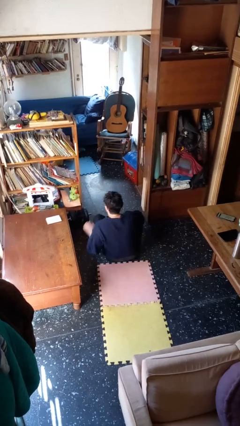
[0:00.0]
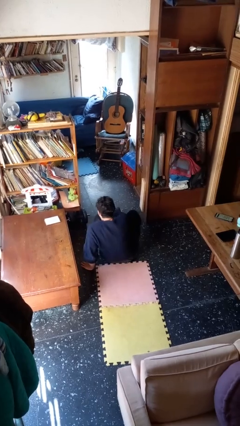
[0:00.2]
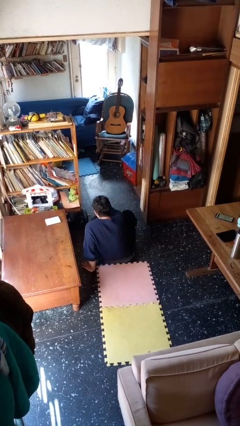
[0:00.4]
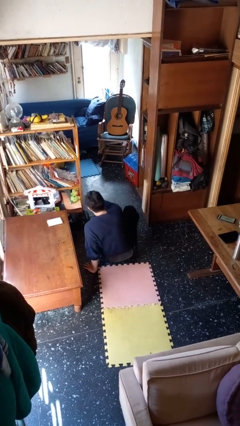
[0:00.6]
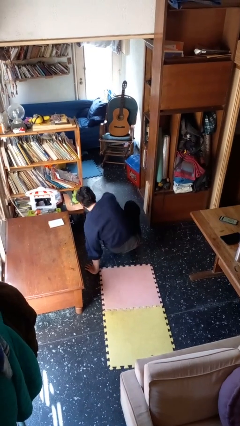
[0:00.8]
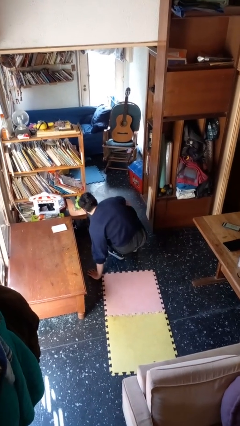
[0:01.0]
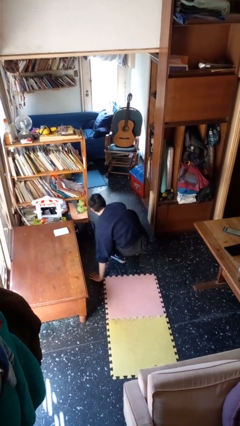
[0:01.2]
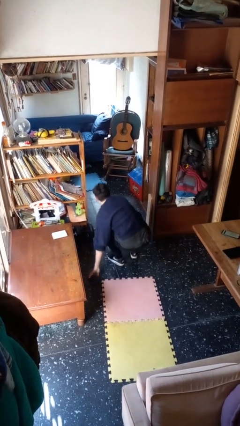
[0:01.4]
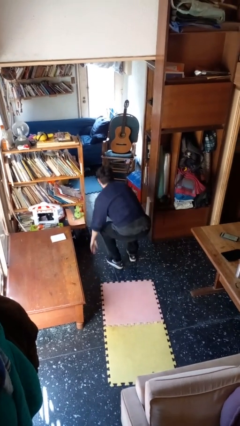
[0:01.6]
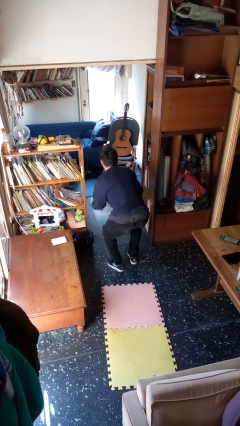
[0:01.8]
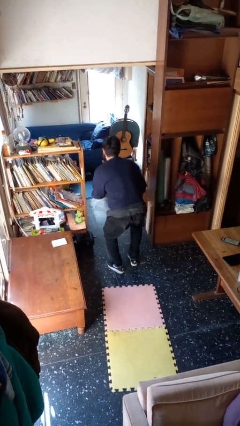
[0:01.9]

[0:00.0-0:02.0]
person stands up from floor

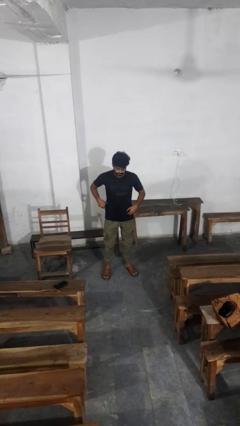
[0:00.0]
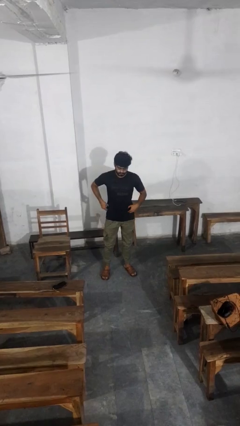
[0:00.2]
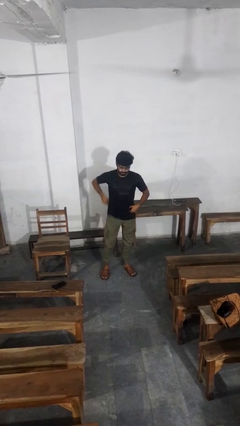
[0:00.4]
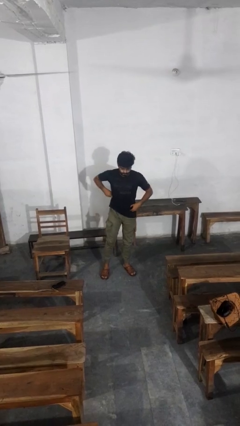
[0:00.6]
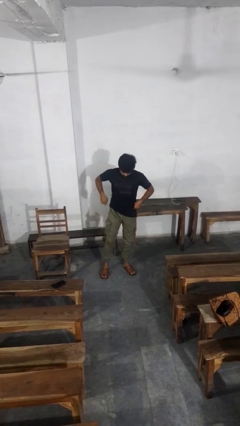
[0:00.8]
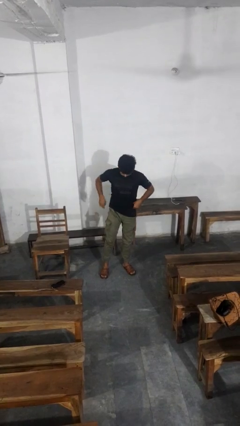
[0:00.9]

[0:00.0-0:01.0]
person hikes up pants

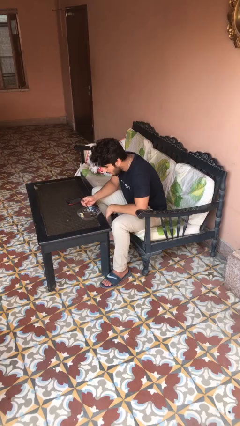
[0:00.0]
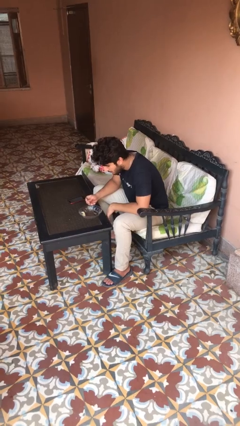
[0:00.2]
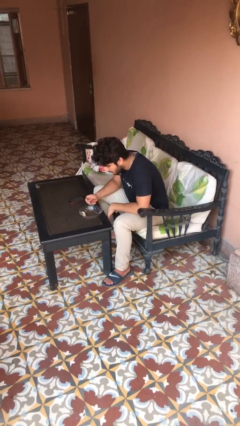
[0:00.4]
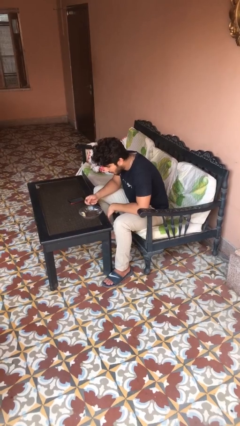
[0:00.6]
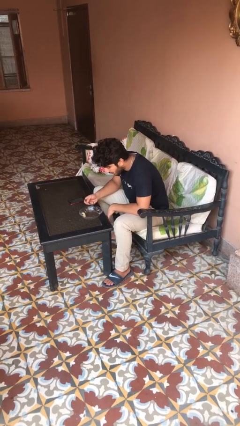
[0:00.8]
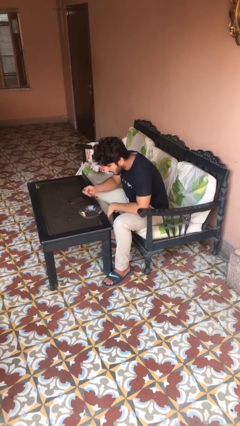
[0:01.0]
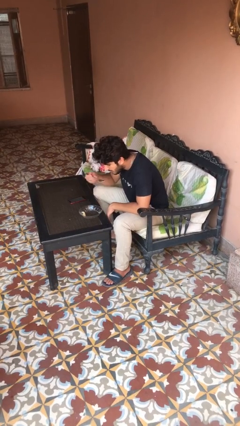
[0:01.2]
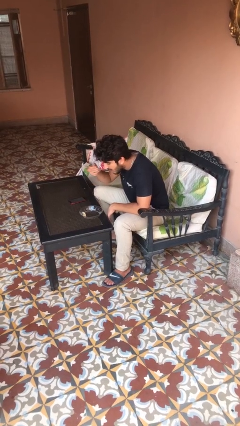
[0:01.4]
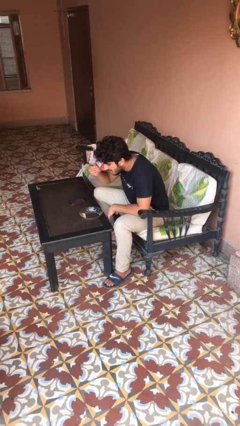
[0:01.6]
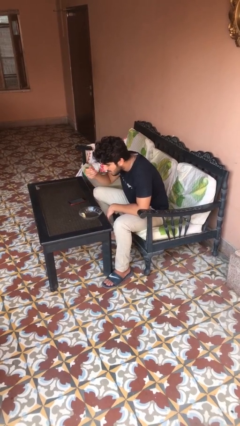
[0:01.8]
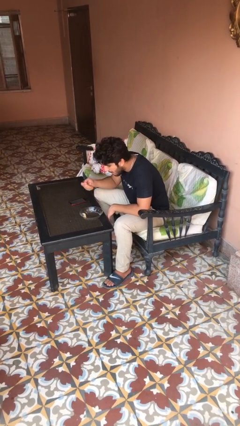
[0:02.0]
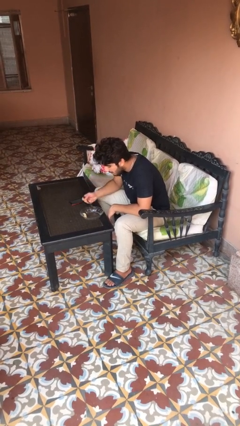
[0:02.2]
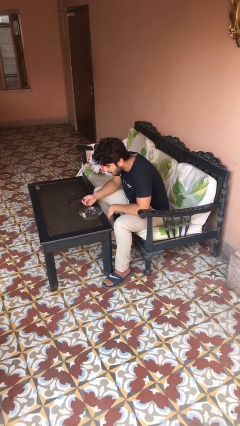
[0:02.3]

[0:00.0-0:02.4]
person eats with utensil

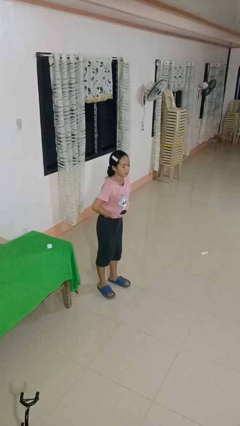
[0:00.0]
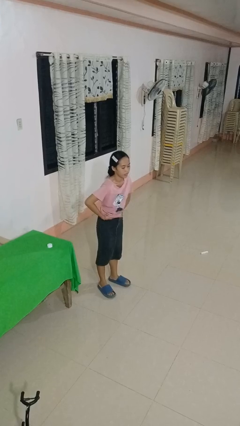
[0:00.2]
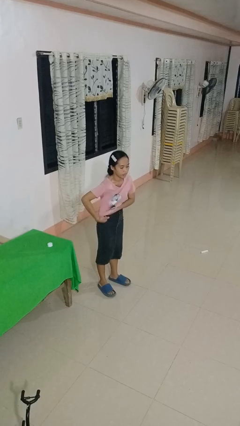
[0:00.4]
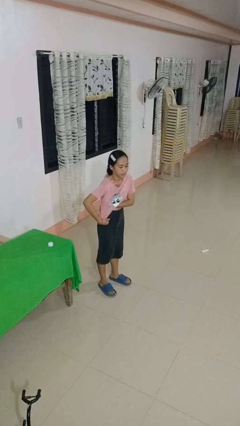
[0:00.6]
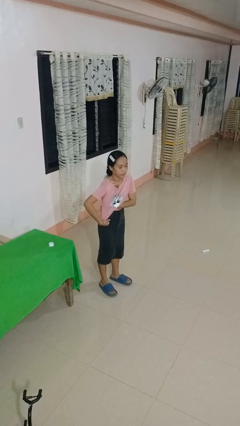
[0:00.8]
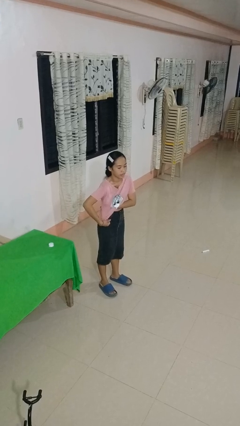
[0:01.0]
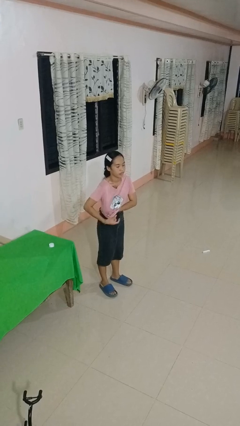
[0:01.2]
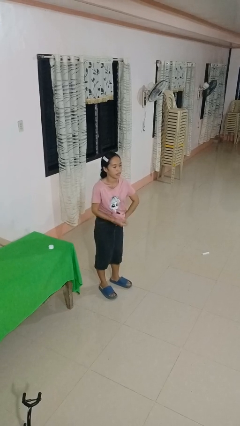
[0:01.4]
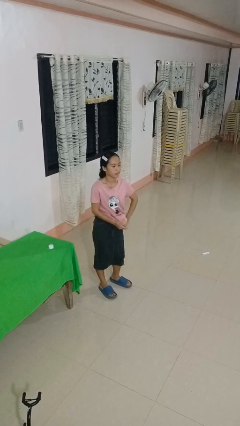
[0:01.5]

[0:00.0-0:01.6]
person applies deodorant

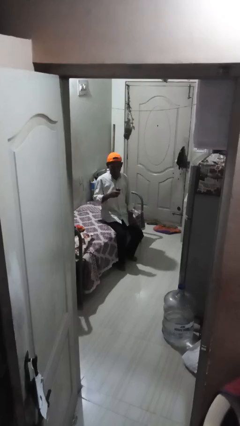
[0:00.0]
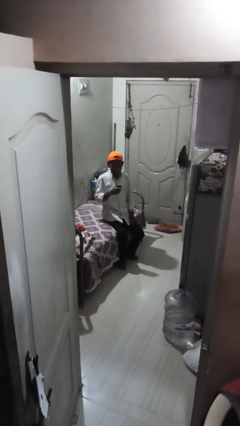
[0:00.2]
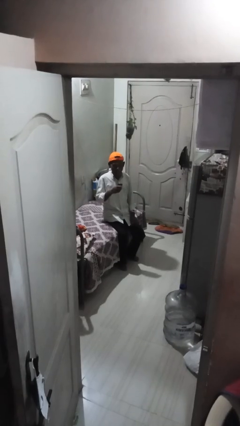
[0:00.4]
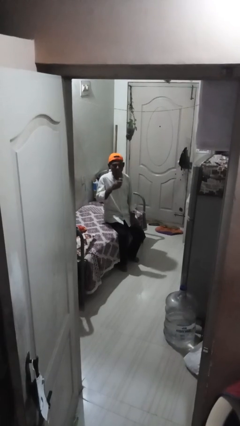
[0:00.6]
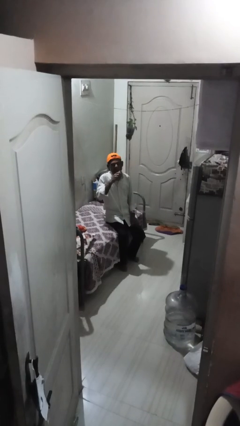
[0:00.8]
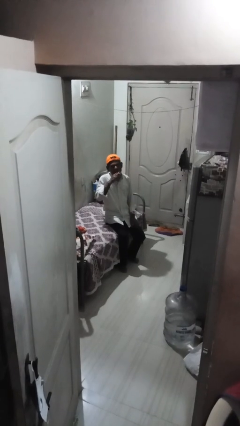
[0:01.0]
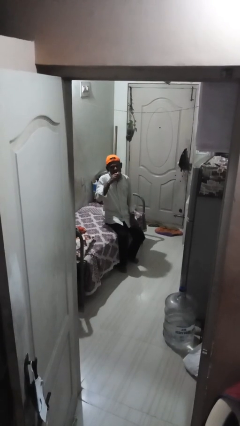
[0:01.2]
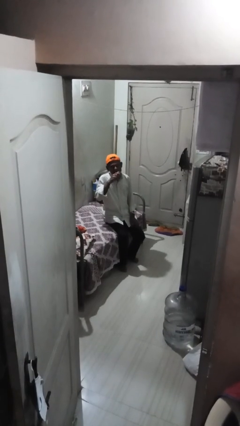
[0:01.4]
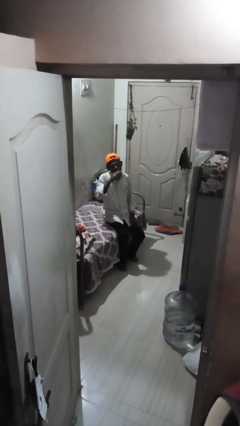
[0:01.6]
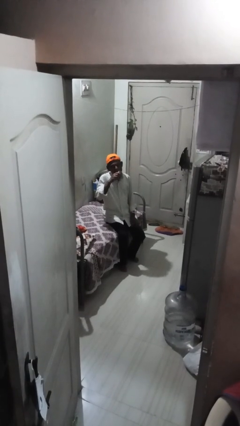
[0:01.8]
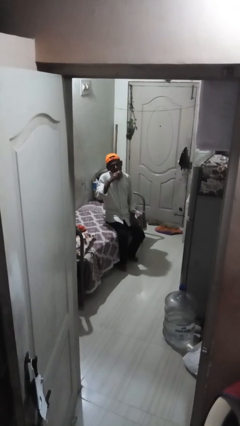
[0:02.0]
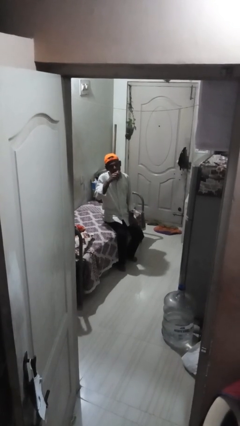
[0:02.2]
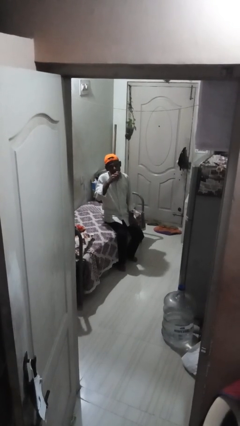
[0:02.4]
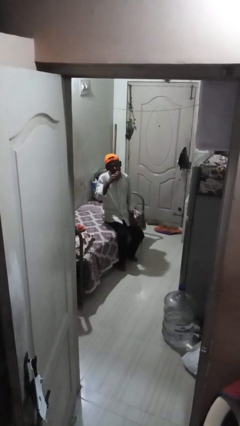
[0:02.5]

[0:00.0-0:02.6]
person eats apple

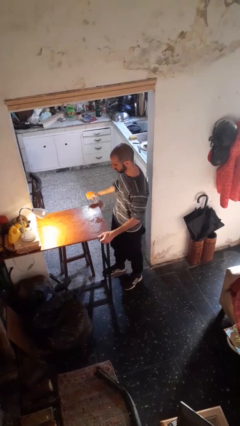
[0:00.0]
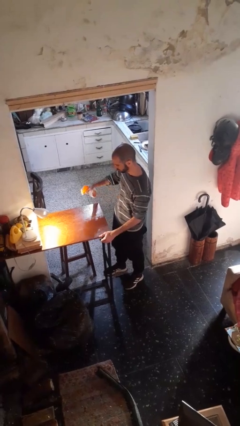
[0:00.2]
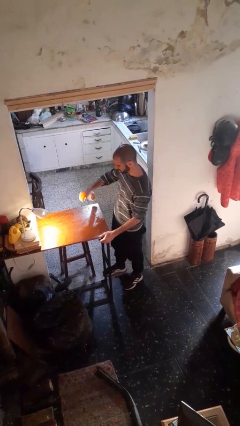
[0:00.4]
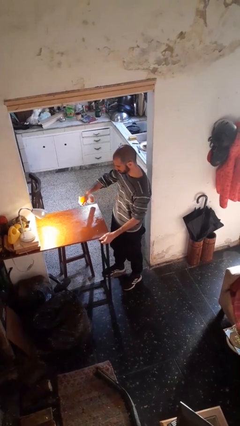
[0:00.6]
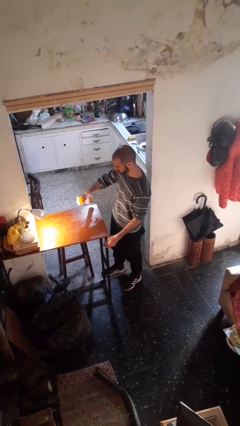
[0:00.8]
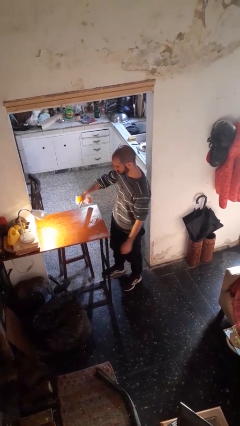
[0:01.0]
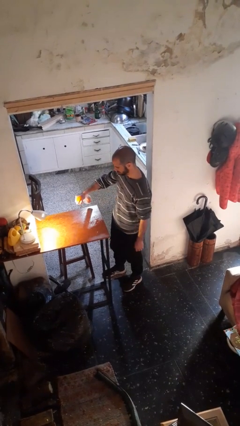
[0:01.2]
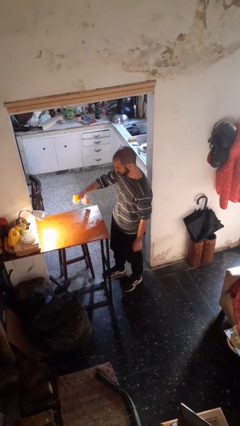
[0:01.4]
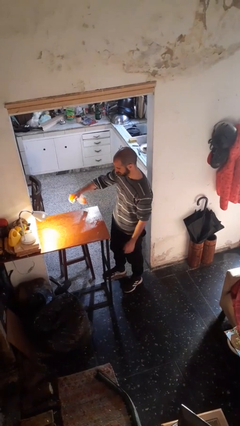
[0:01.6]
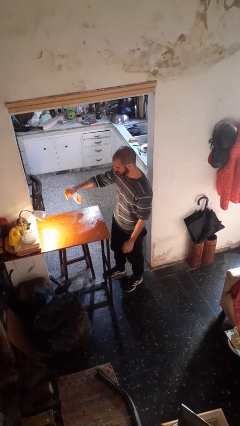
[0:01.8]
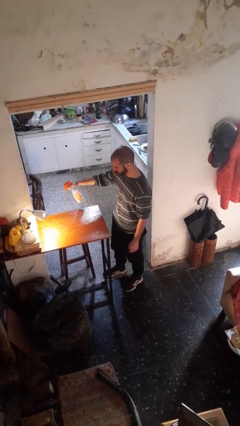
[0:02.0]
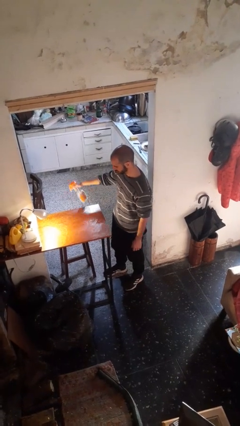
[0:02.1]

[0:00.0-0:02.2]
person sprays from bottle

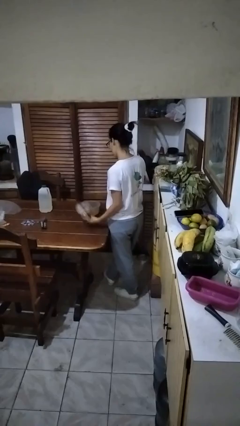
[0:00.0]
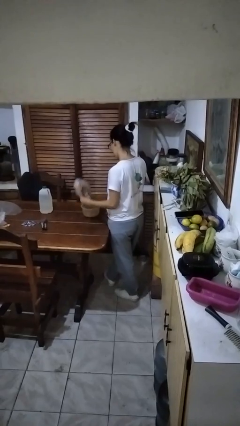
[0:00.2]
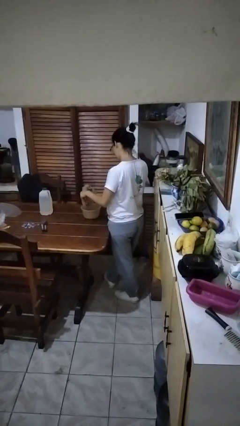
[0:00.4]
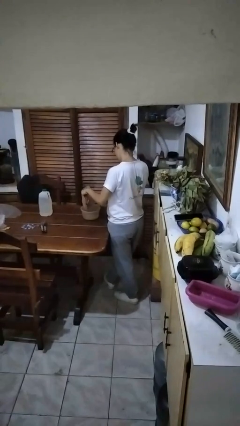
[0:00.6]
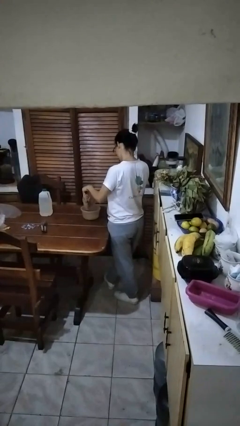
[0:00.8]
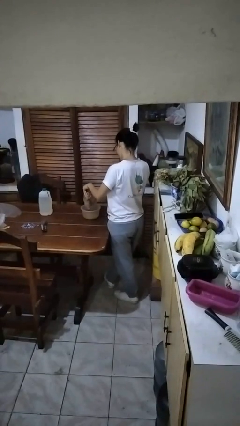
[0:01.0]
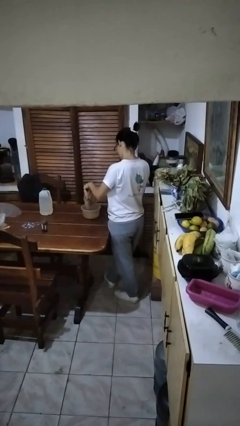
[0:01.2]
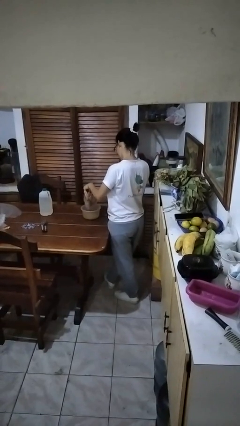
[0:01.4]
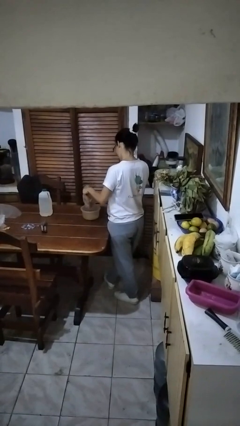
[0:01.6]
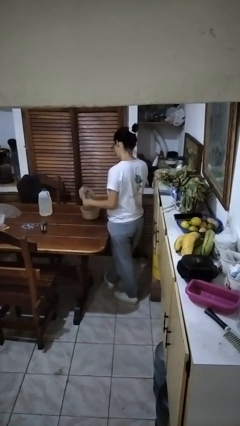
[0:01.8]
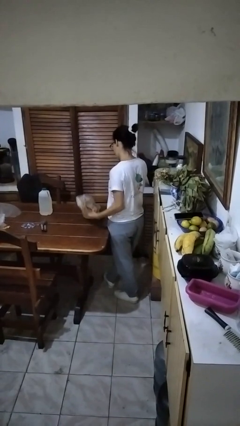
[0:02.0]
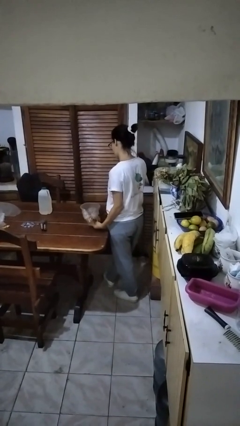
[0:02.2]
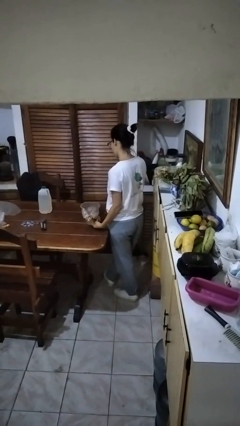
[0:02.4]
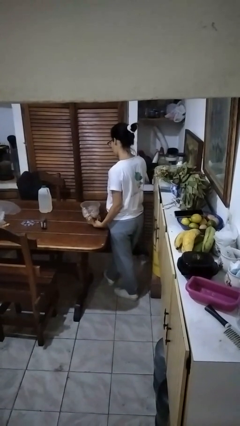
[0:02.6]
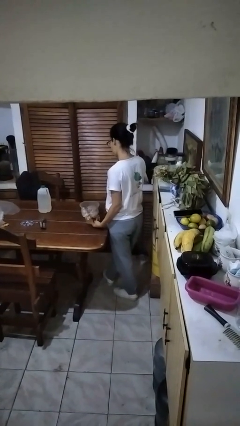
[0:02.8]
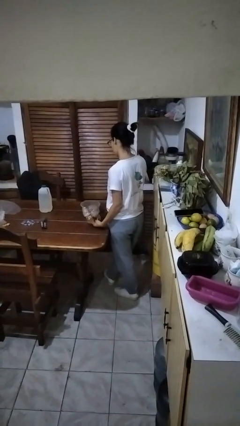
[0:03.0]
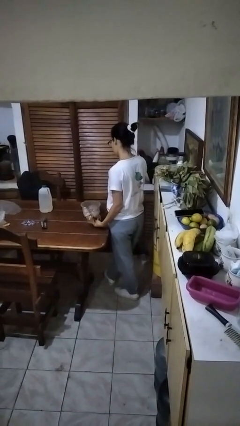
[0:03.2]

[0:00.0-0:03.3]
person pours into bowl

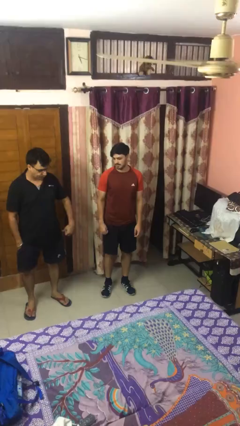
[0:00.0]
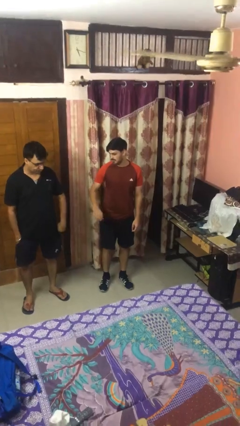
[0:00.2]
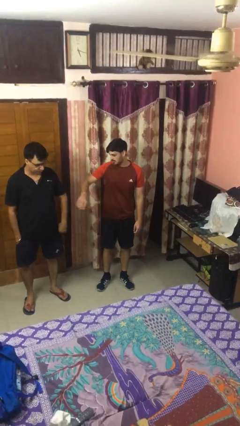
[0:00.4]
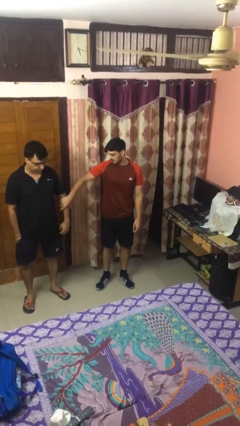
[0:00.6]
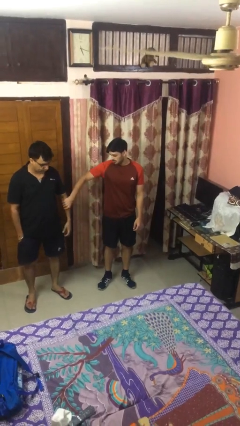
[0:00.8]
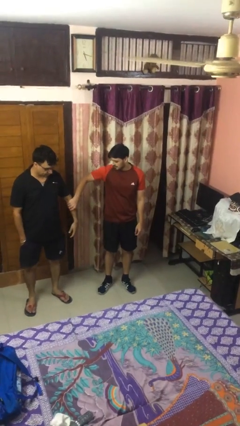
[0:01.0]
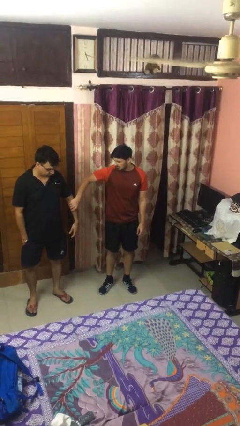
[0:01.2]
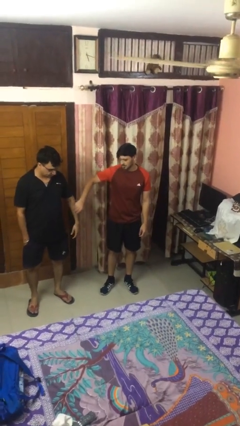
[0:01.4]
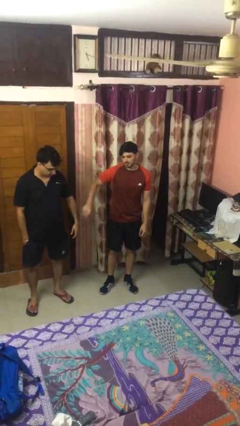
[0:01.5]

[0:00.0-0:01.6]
person grabs person by forearm
